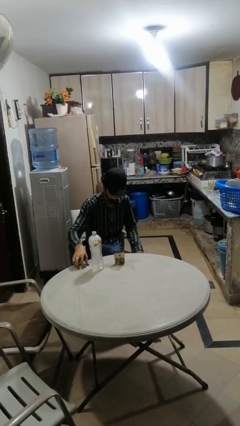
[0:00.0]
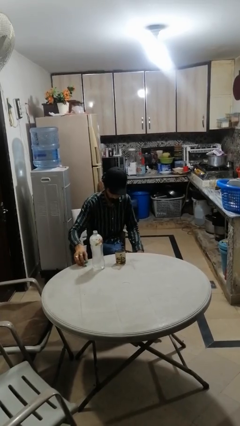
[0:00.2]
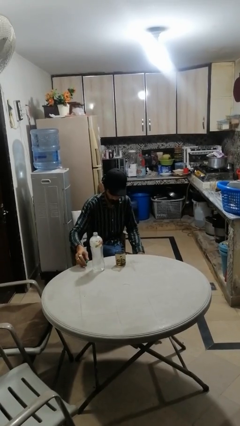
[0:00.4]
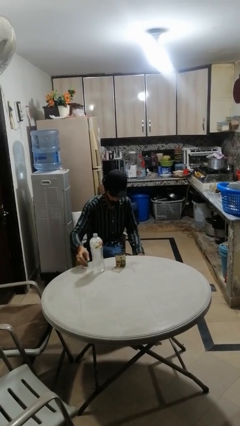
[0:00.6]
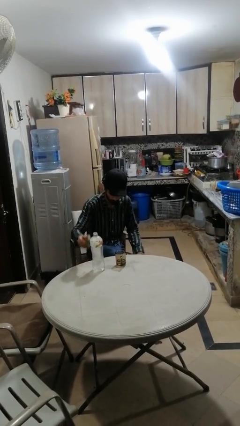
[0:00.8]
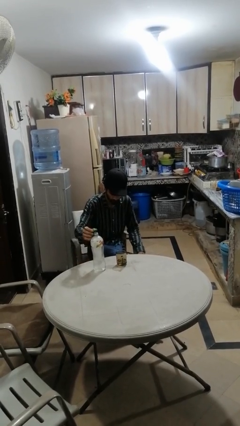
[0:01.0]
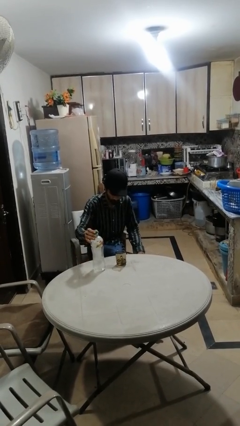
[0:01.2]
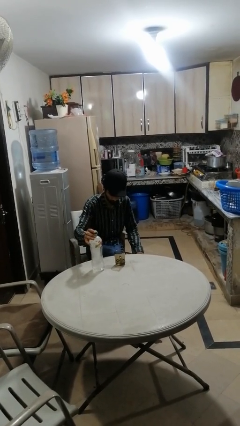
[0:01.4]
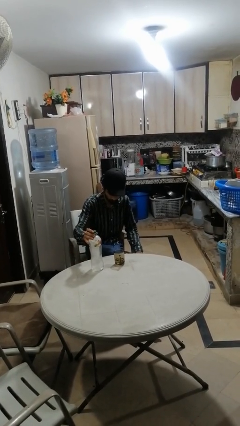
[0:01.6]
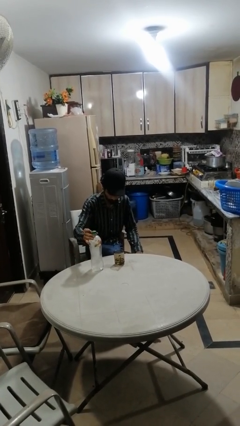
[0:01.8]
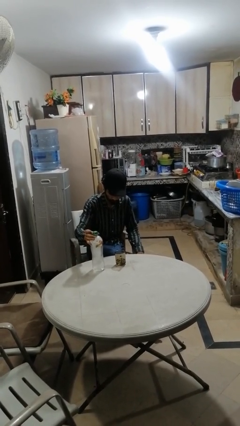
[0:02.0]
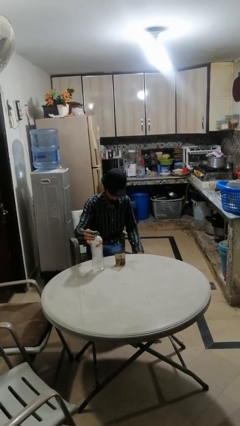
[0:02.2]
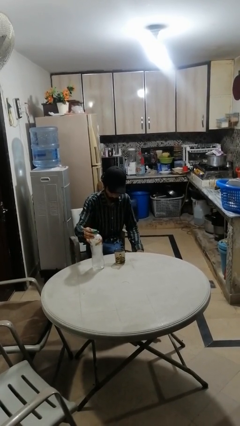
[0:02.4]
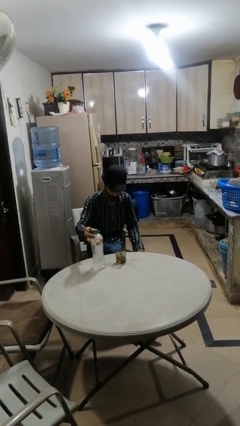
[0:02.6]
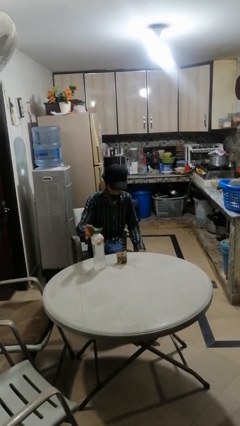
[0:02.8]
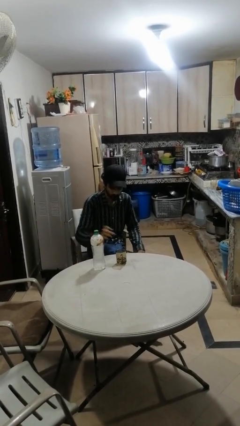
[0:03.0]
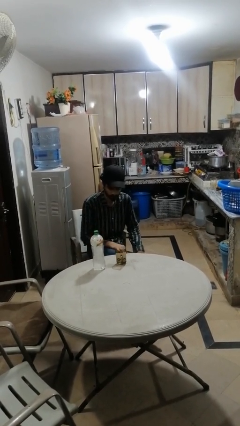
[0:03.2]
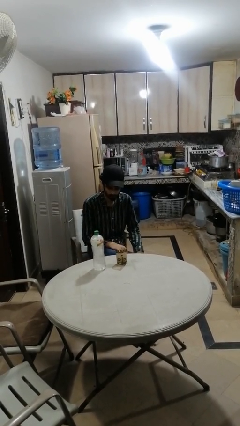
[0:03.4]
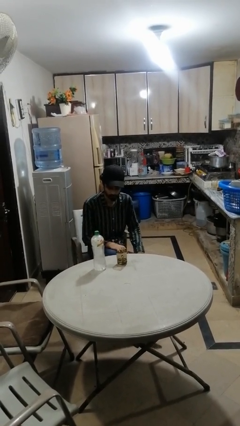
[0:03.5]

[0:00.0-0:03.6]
person screws lid to bottle

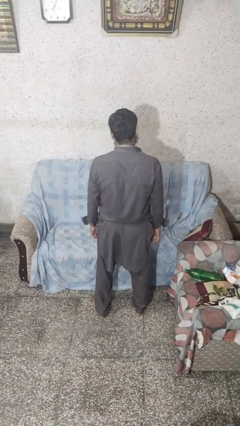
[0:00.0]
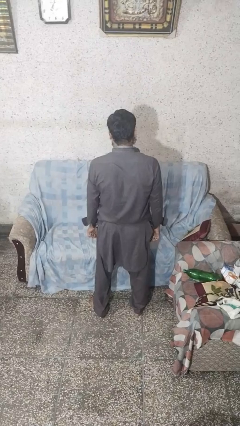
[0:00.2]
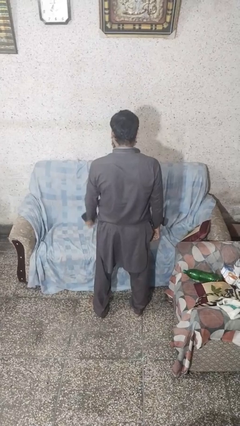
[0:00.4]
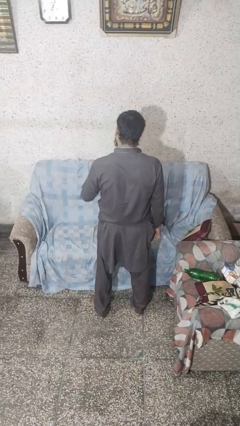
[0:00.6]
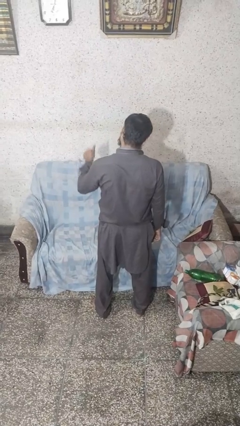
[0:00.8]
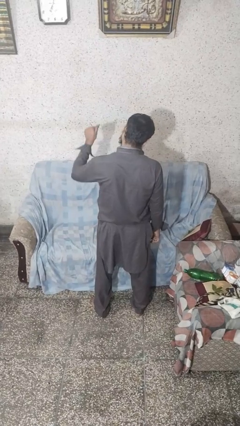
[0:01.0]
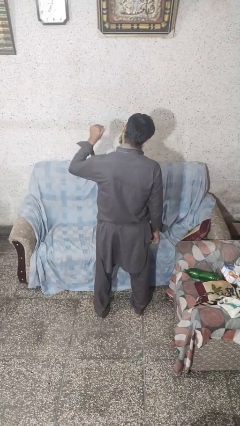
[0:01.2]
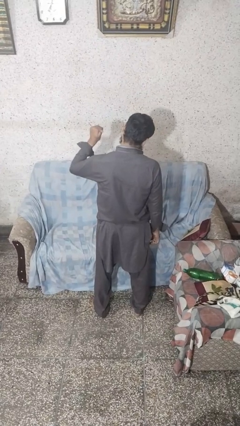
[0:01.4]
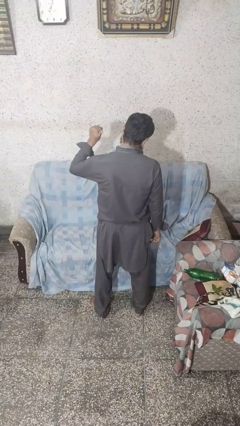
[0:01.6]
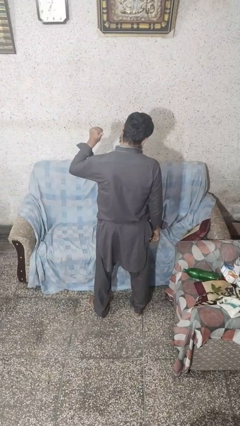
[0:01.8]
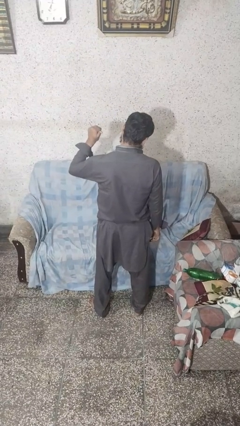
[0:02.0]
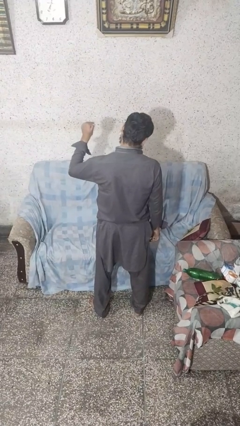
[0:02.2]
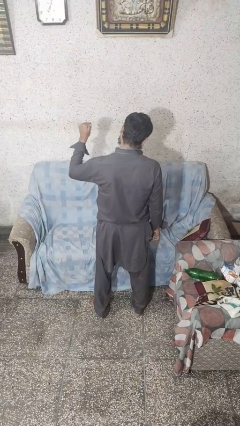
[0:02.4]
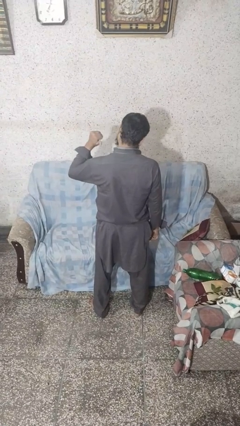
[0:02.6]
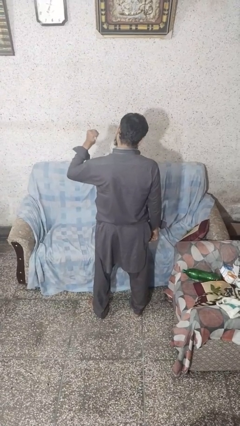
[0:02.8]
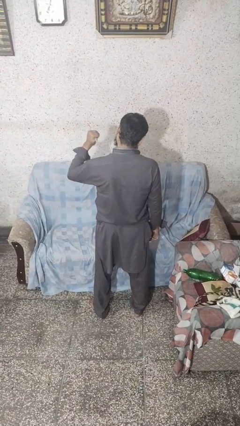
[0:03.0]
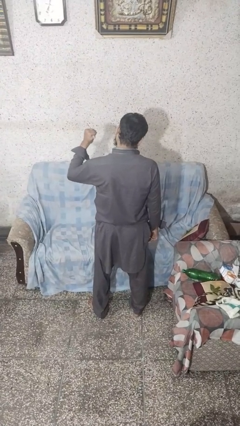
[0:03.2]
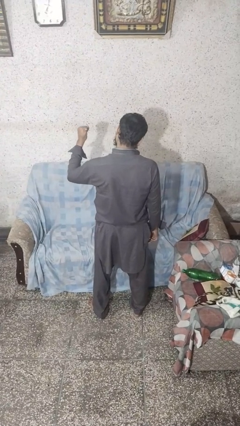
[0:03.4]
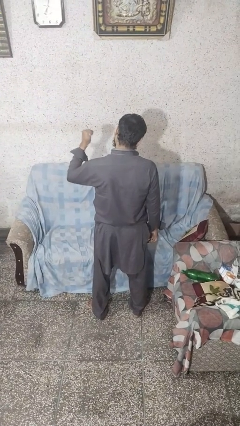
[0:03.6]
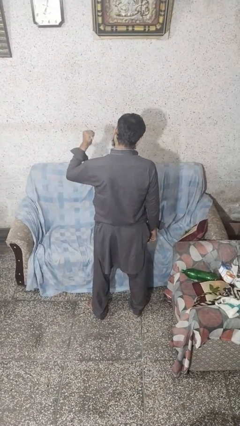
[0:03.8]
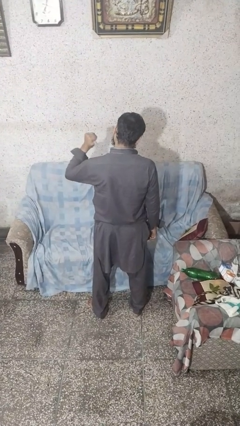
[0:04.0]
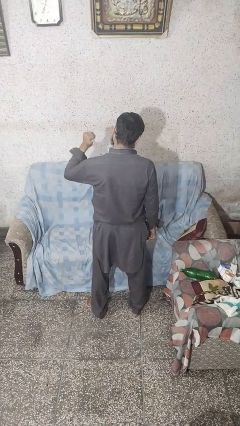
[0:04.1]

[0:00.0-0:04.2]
person gestures behind me

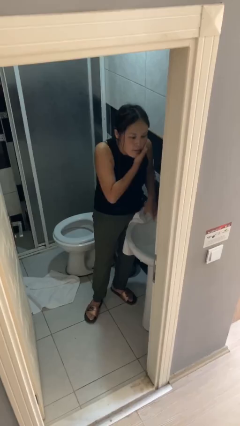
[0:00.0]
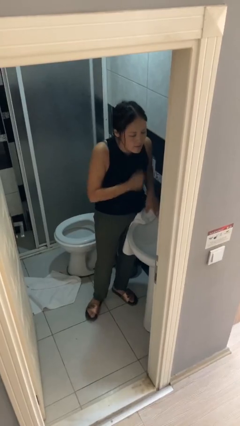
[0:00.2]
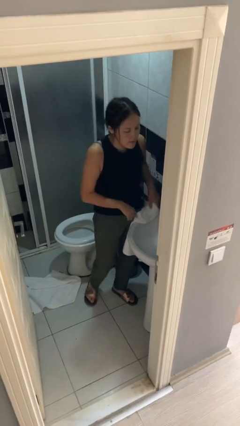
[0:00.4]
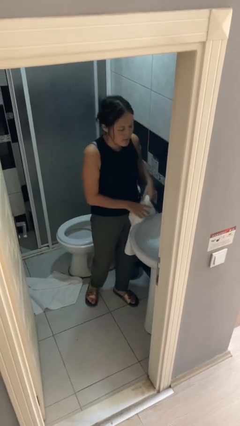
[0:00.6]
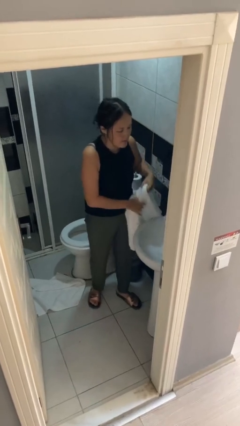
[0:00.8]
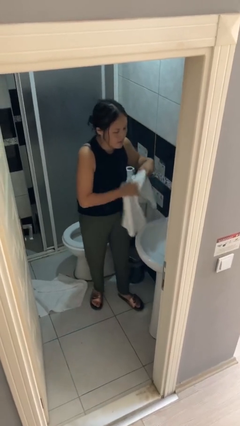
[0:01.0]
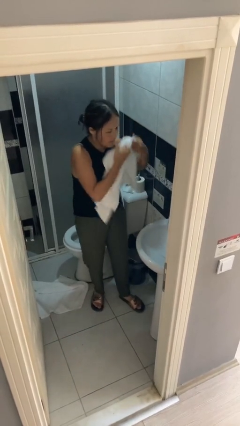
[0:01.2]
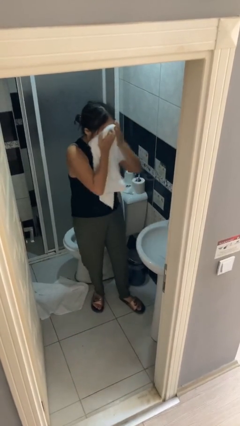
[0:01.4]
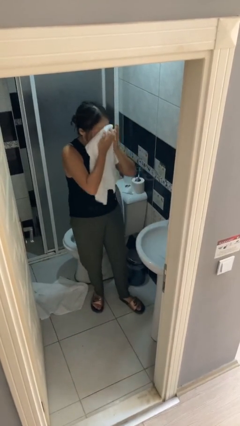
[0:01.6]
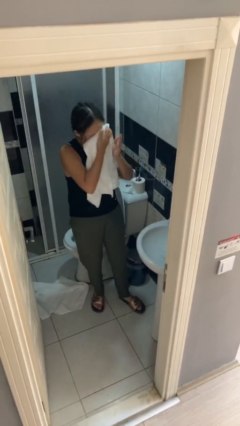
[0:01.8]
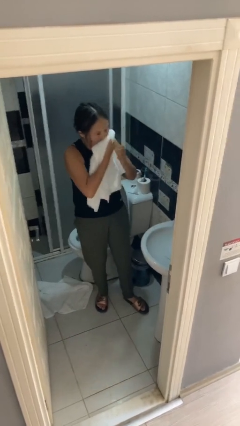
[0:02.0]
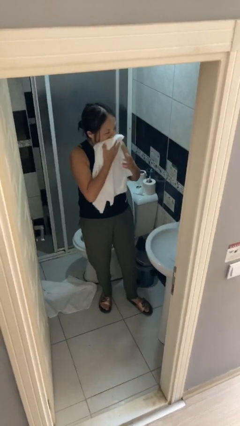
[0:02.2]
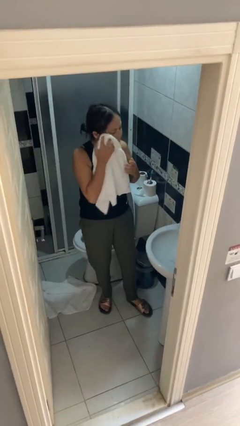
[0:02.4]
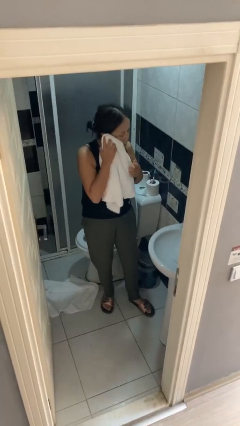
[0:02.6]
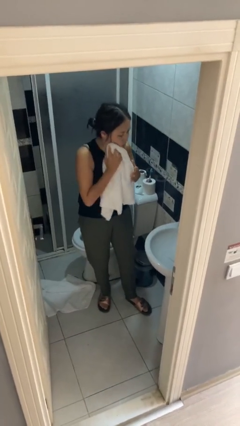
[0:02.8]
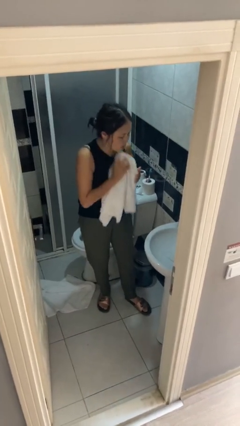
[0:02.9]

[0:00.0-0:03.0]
person dries face with towel

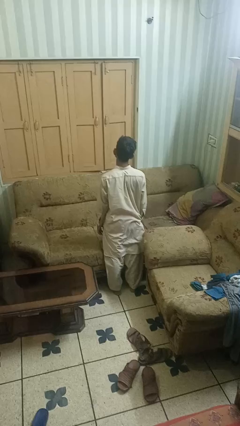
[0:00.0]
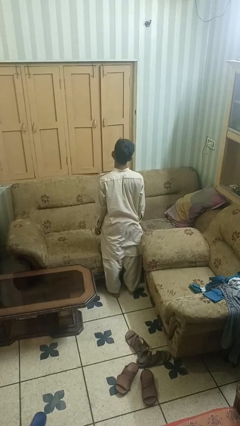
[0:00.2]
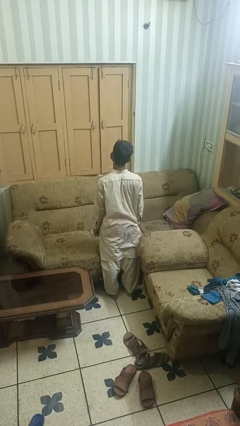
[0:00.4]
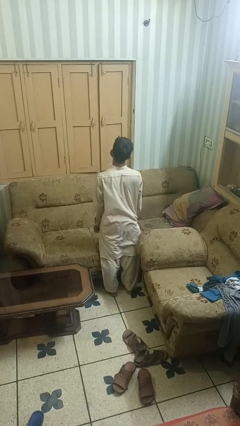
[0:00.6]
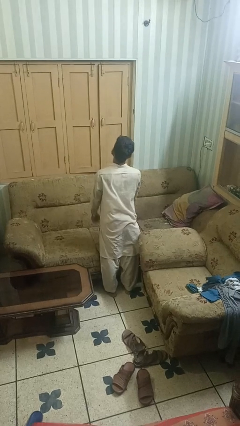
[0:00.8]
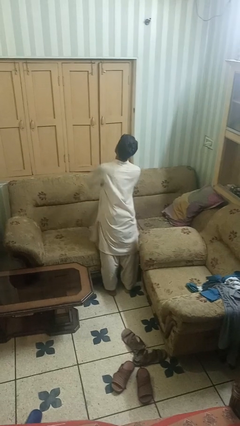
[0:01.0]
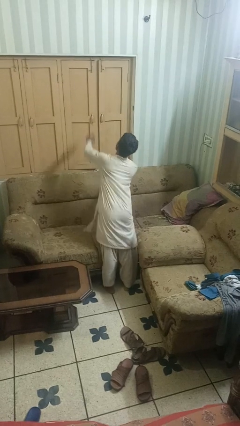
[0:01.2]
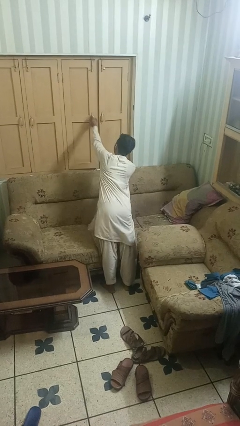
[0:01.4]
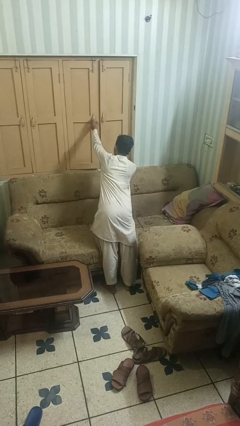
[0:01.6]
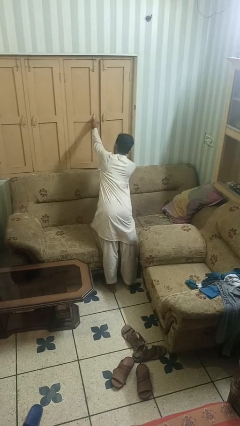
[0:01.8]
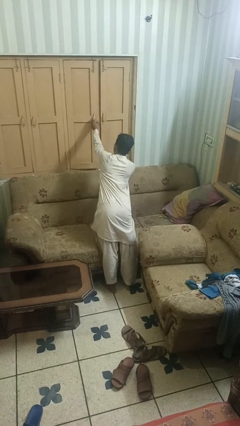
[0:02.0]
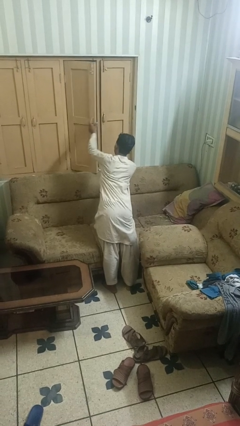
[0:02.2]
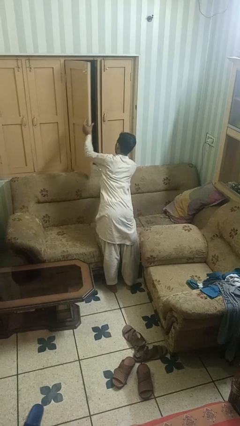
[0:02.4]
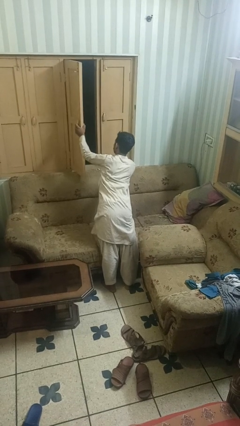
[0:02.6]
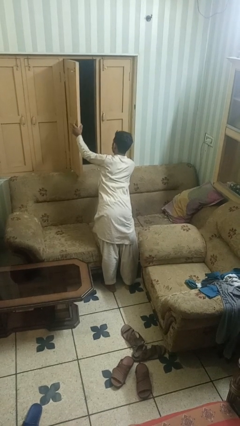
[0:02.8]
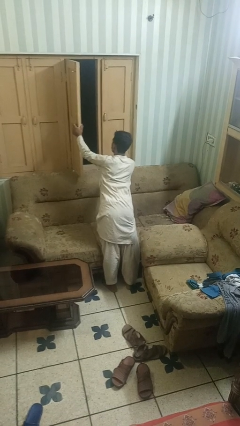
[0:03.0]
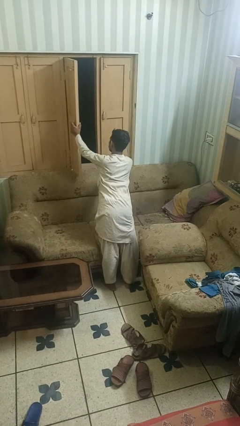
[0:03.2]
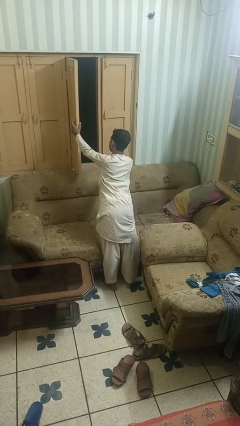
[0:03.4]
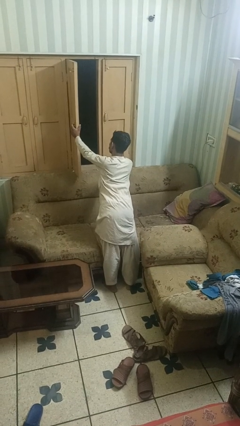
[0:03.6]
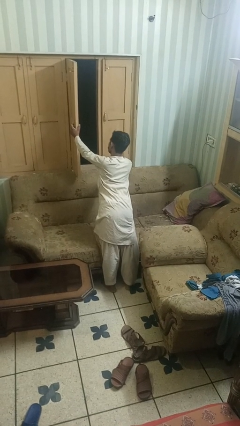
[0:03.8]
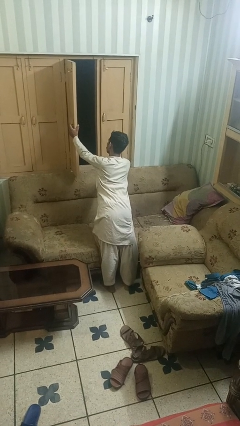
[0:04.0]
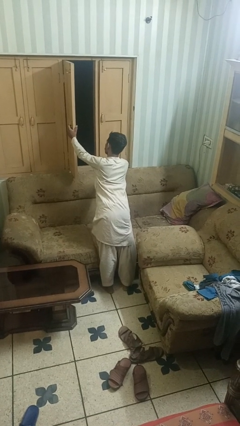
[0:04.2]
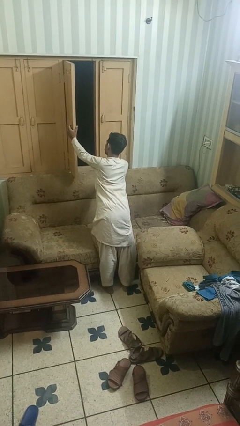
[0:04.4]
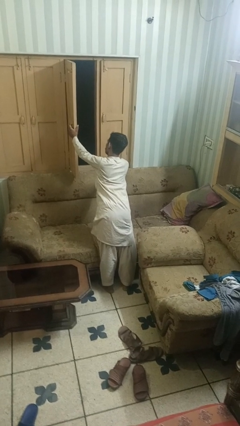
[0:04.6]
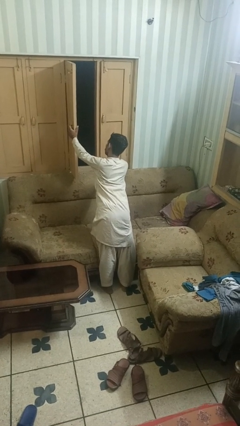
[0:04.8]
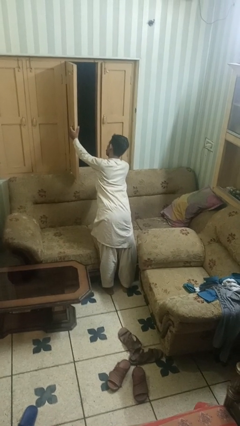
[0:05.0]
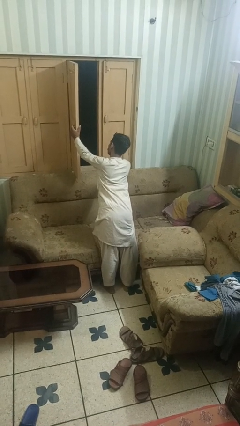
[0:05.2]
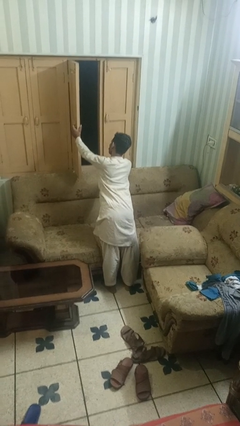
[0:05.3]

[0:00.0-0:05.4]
person opens home window

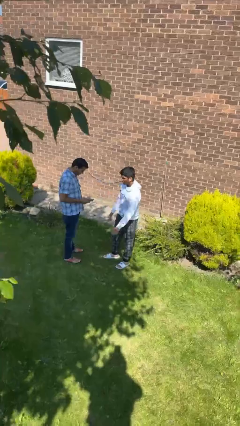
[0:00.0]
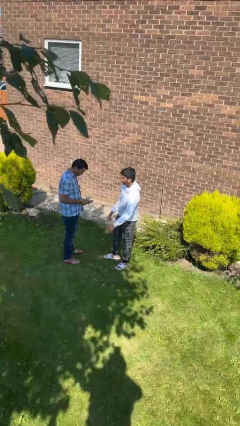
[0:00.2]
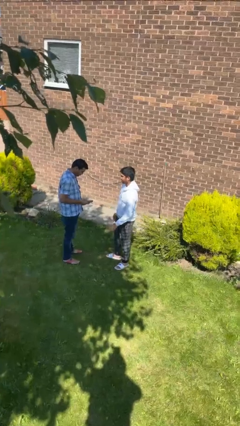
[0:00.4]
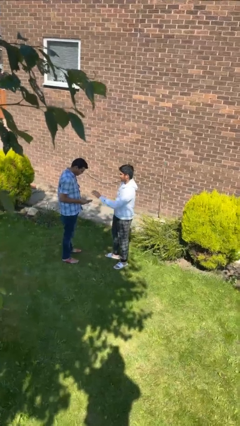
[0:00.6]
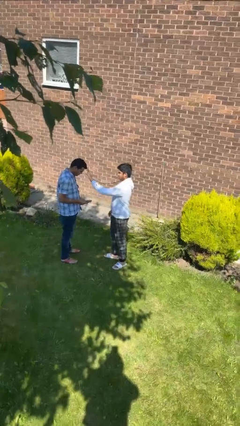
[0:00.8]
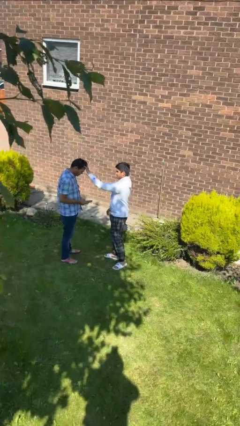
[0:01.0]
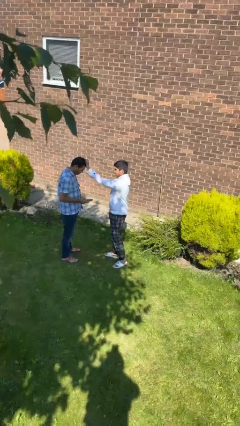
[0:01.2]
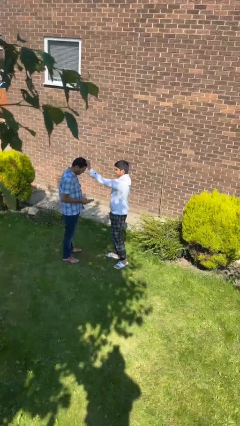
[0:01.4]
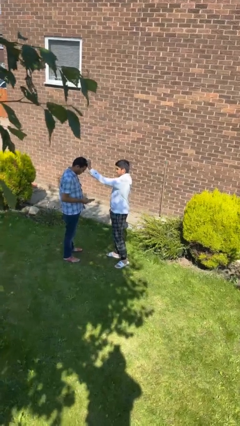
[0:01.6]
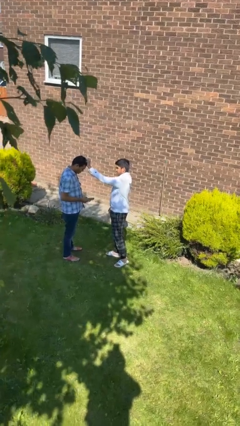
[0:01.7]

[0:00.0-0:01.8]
person grabs person by hair
